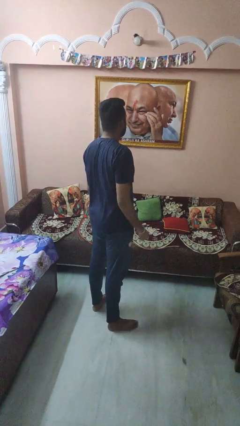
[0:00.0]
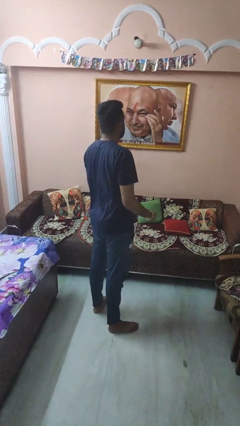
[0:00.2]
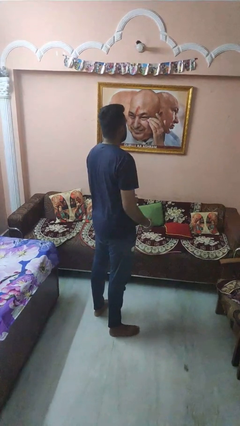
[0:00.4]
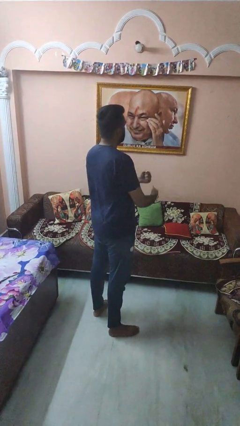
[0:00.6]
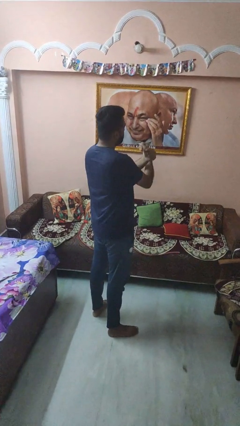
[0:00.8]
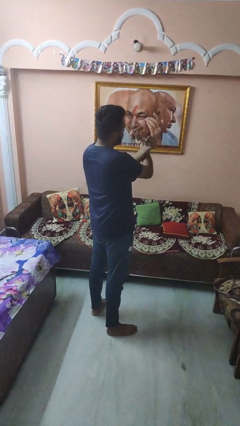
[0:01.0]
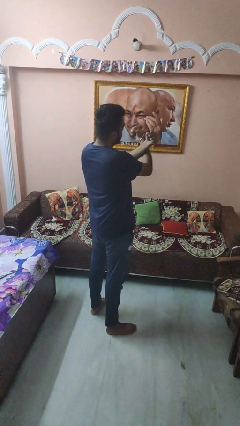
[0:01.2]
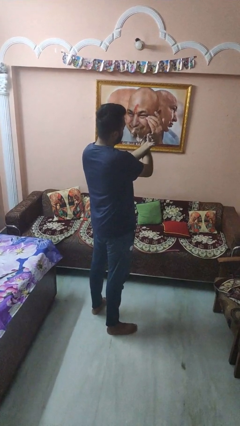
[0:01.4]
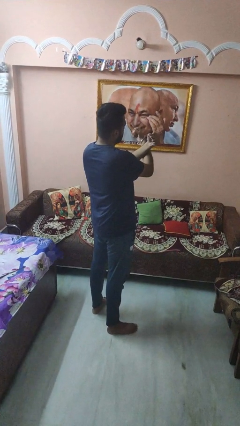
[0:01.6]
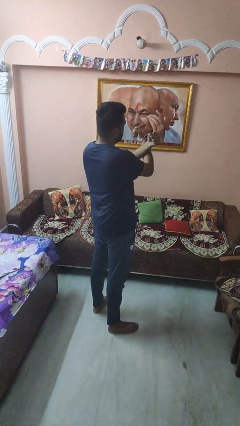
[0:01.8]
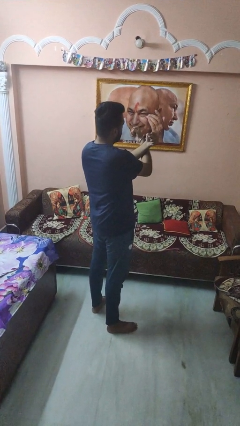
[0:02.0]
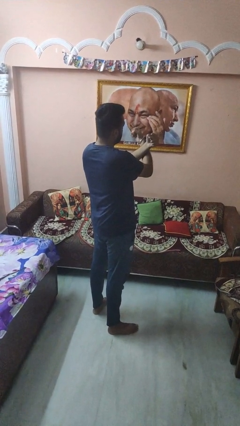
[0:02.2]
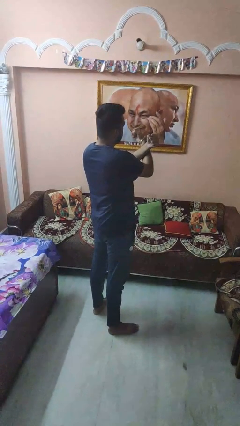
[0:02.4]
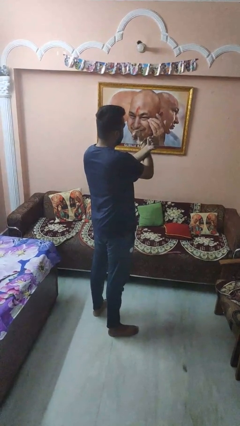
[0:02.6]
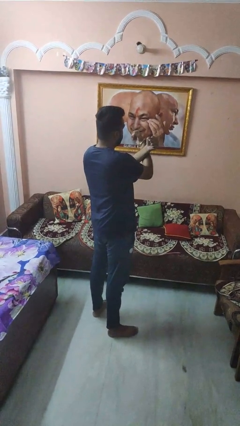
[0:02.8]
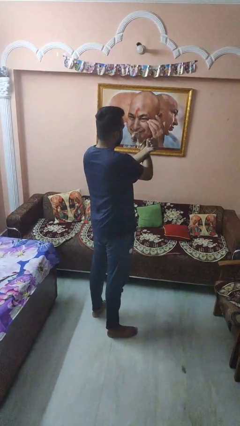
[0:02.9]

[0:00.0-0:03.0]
person gestures arms x

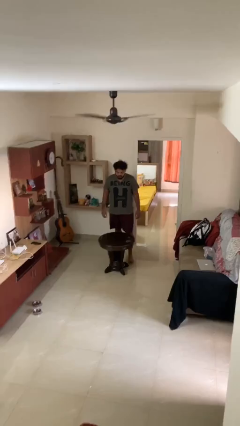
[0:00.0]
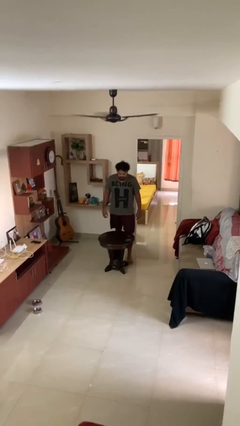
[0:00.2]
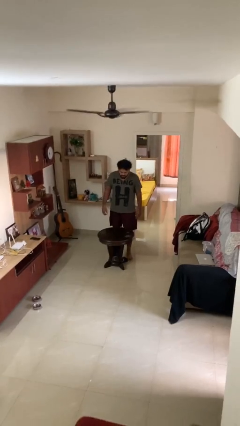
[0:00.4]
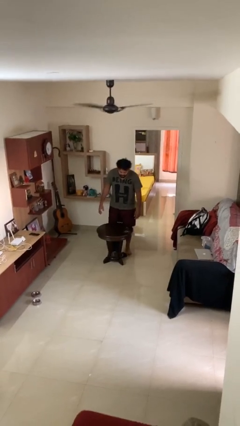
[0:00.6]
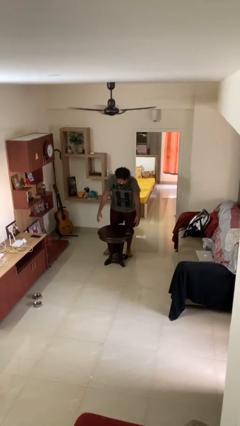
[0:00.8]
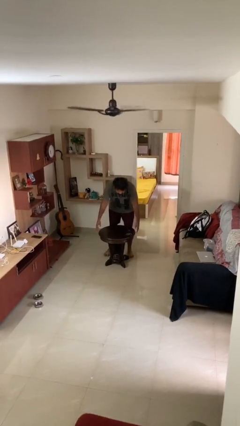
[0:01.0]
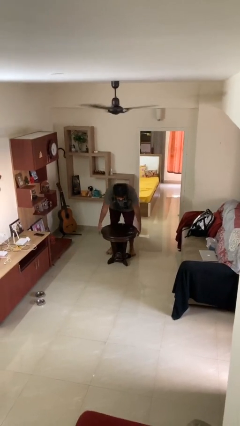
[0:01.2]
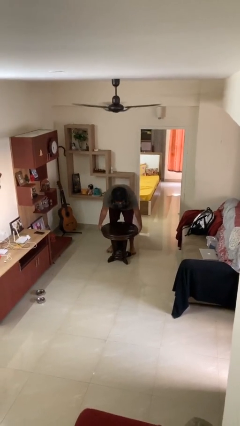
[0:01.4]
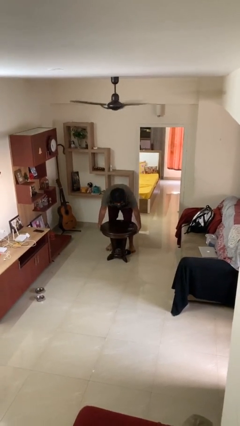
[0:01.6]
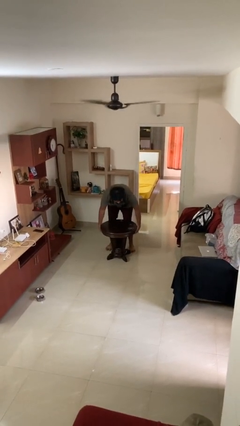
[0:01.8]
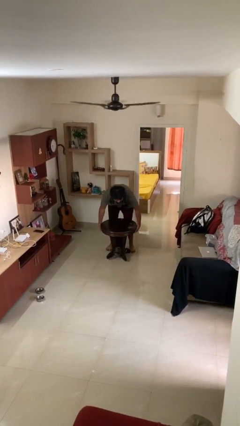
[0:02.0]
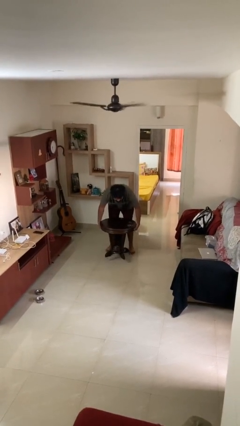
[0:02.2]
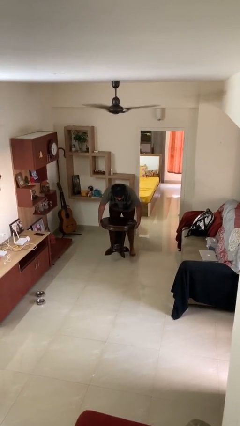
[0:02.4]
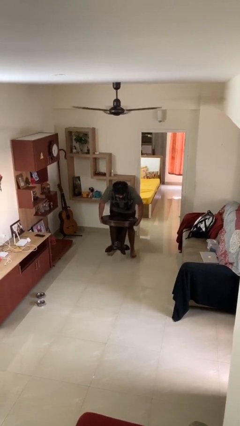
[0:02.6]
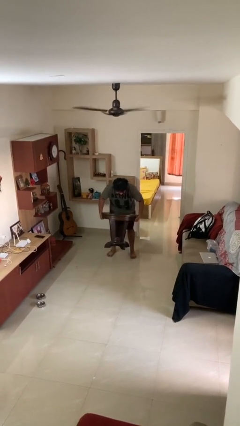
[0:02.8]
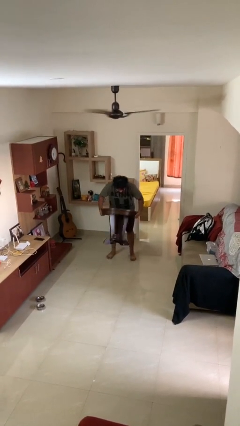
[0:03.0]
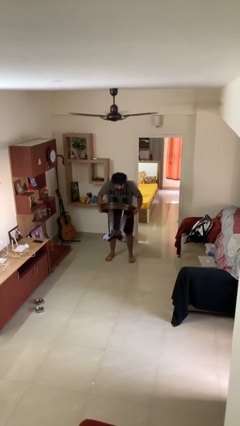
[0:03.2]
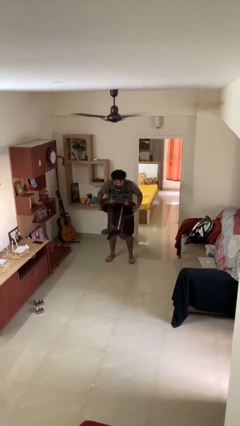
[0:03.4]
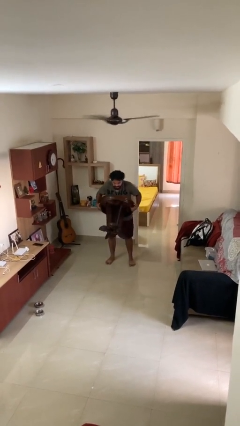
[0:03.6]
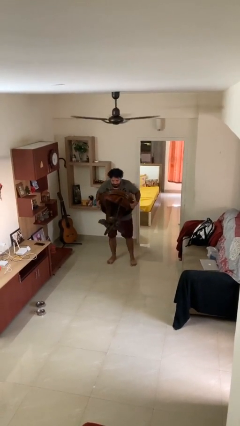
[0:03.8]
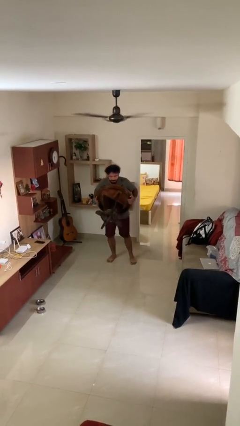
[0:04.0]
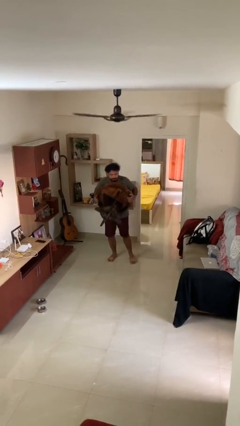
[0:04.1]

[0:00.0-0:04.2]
person picks up object from floor

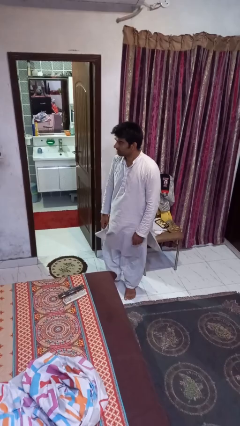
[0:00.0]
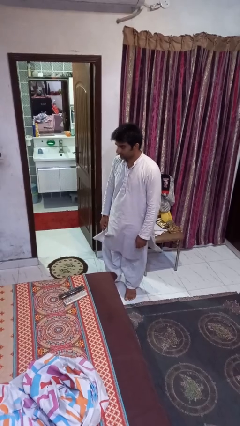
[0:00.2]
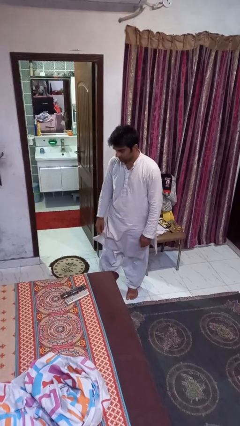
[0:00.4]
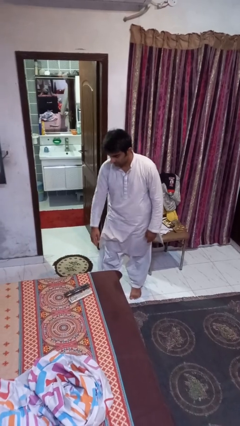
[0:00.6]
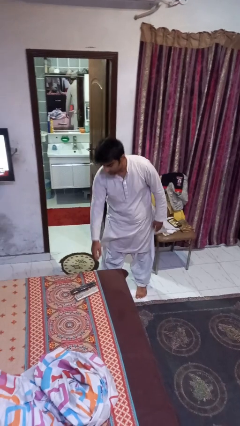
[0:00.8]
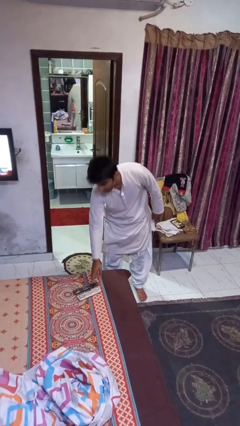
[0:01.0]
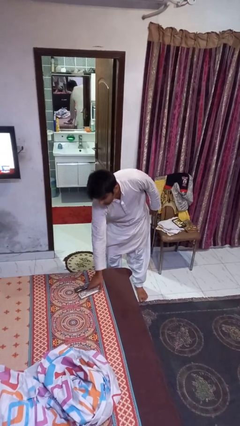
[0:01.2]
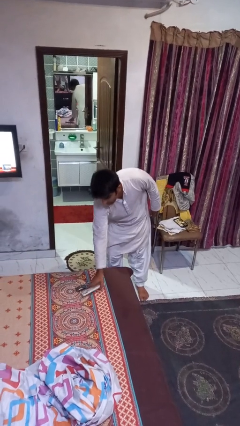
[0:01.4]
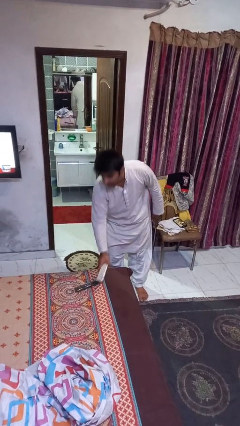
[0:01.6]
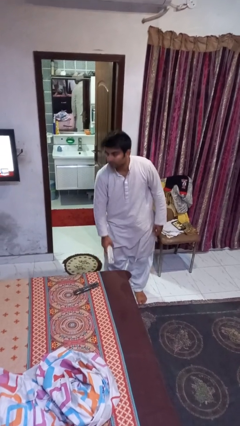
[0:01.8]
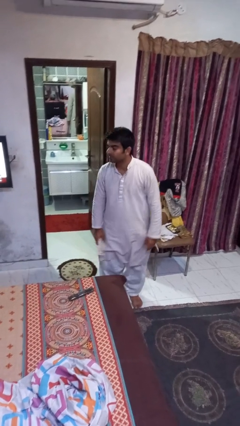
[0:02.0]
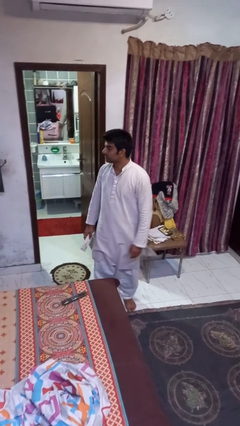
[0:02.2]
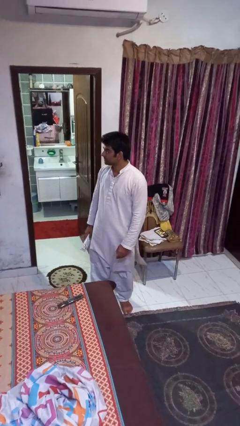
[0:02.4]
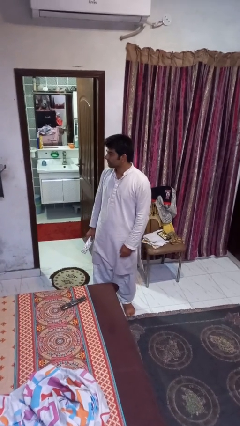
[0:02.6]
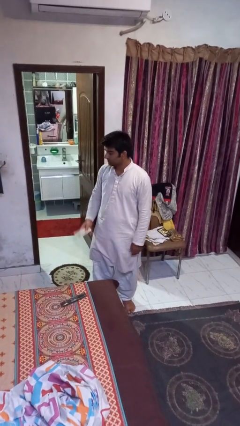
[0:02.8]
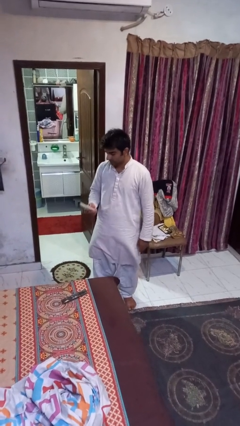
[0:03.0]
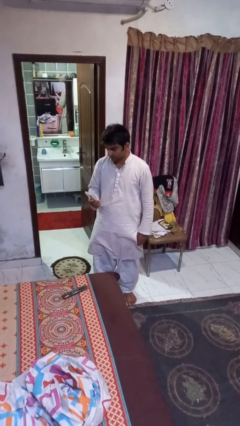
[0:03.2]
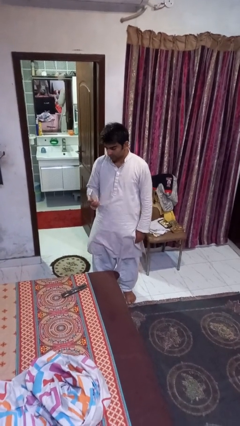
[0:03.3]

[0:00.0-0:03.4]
person picks up object from bed

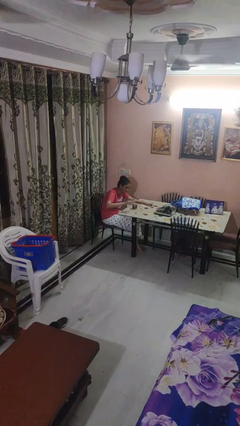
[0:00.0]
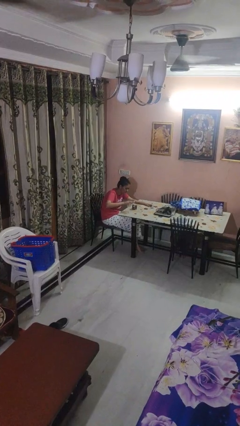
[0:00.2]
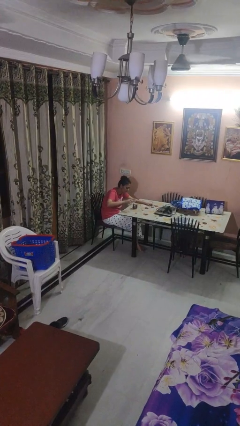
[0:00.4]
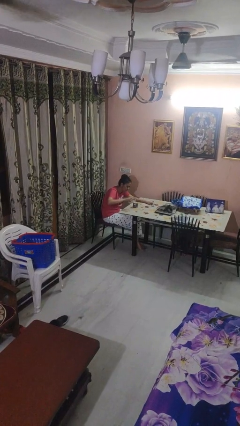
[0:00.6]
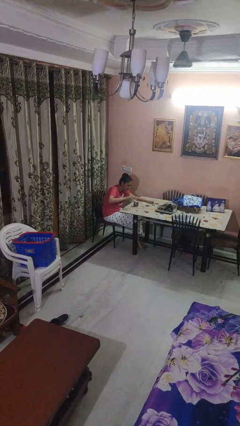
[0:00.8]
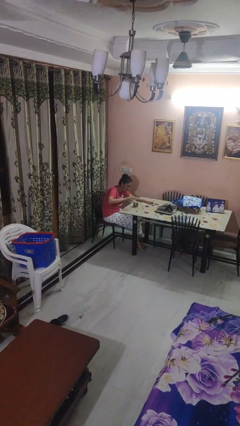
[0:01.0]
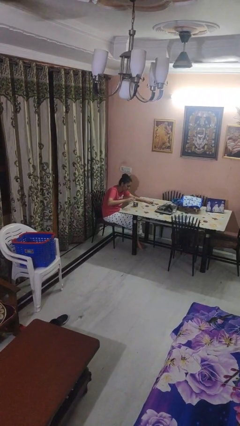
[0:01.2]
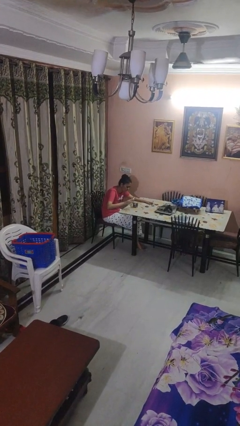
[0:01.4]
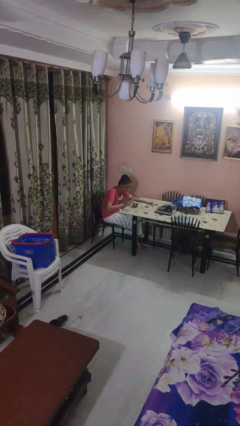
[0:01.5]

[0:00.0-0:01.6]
person pours liquid into cup

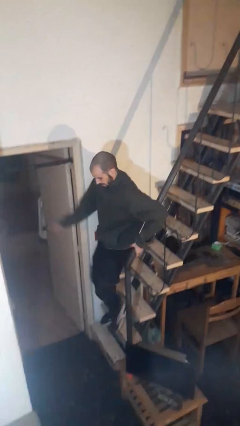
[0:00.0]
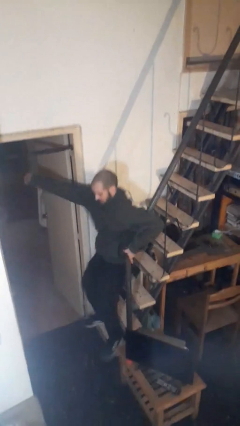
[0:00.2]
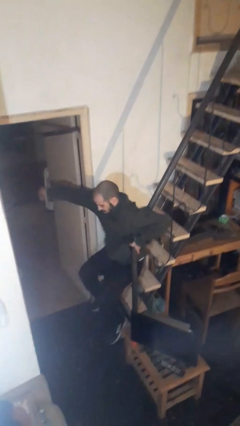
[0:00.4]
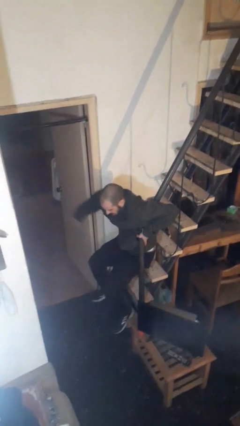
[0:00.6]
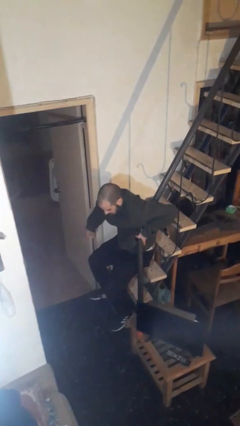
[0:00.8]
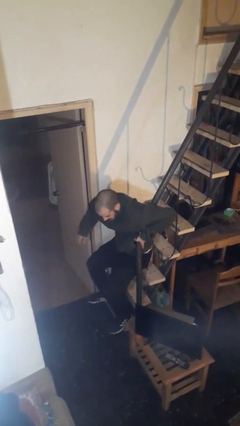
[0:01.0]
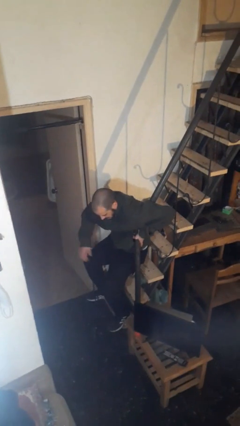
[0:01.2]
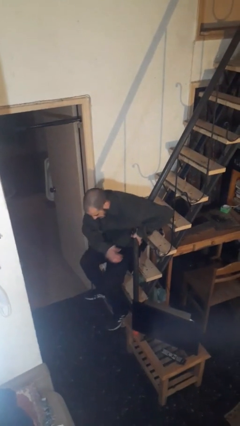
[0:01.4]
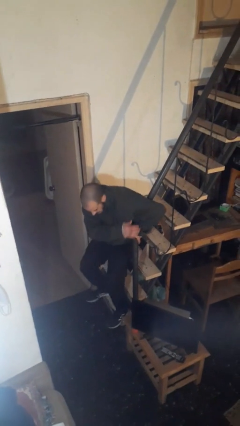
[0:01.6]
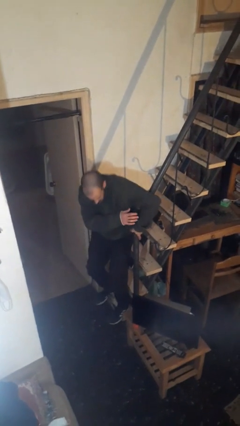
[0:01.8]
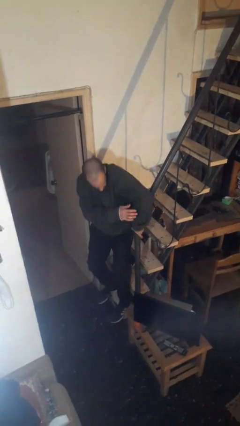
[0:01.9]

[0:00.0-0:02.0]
person trips on stair

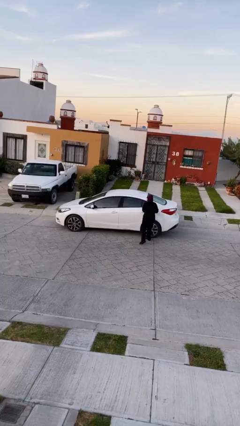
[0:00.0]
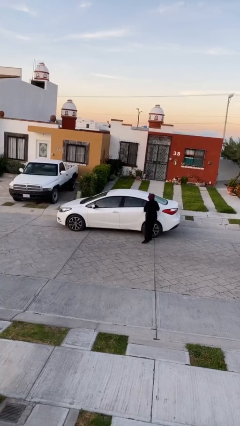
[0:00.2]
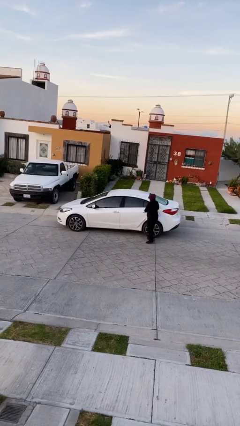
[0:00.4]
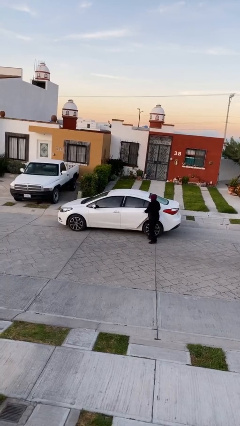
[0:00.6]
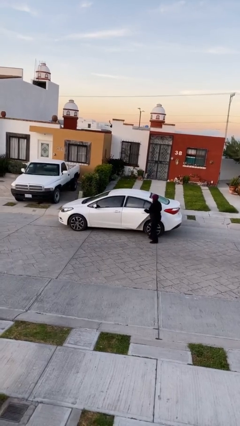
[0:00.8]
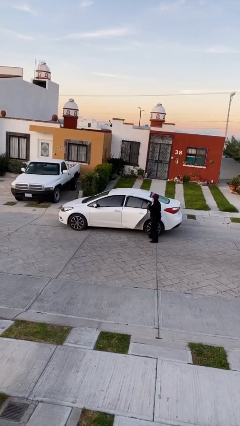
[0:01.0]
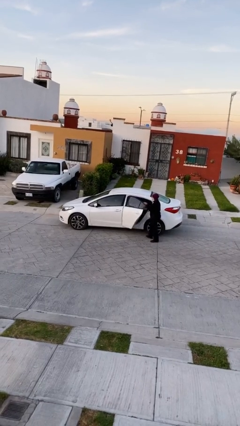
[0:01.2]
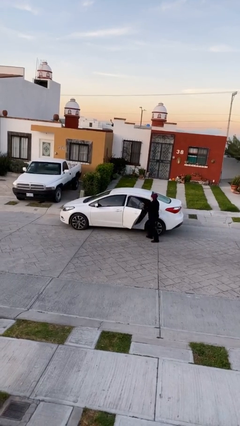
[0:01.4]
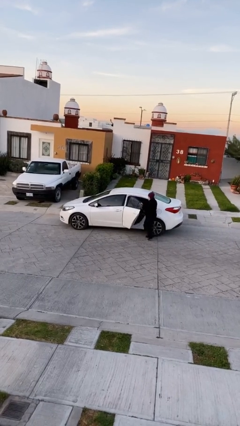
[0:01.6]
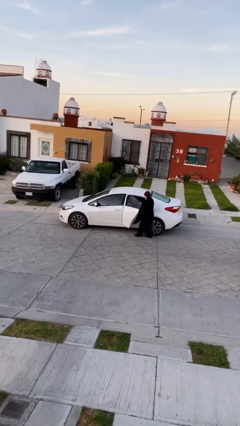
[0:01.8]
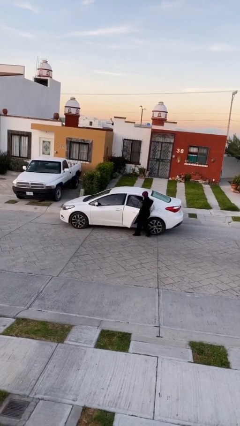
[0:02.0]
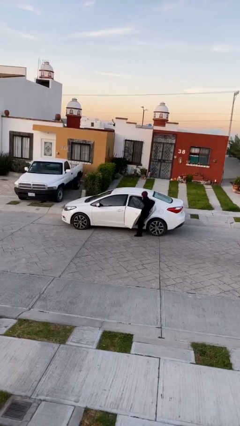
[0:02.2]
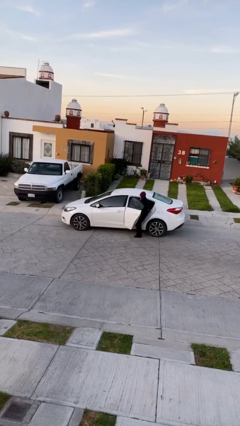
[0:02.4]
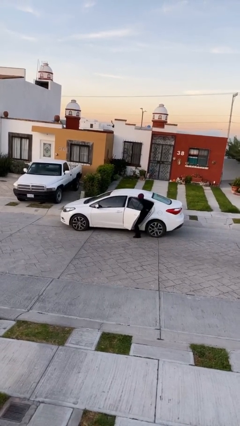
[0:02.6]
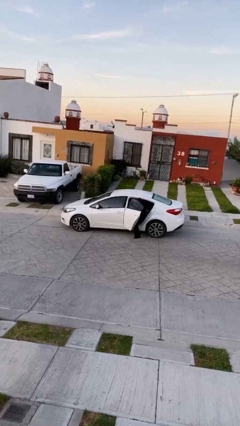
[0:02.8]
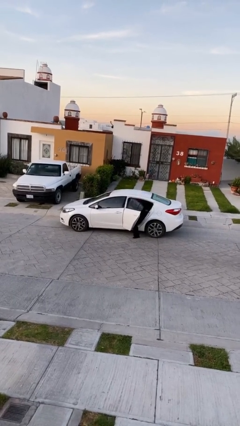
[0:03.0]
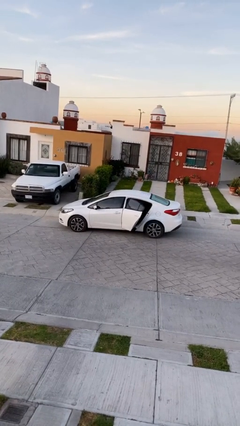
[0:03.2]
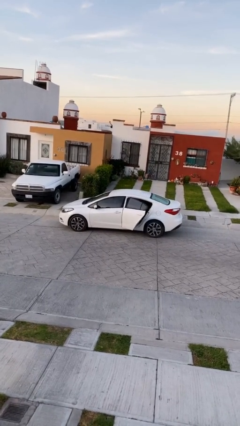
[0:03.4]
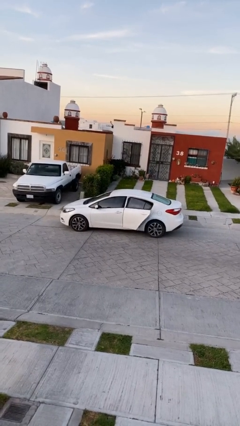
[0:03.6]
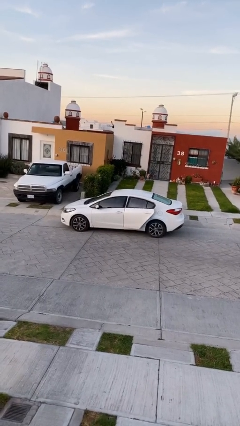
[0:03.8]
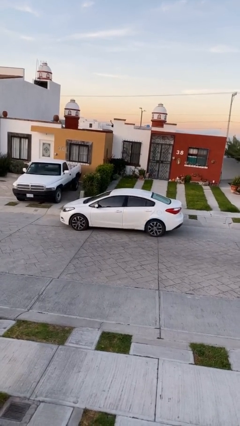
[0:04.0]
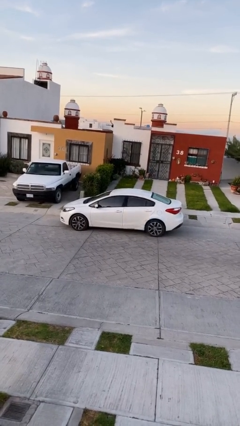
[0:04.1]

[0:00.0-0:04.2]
car picks up person
